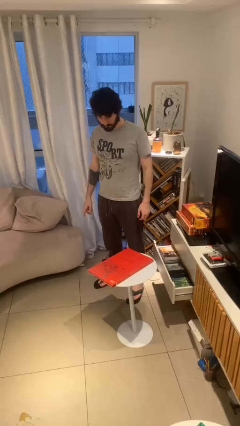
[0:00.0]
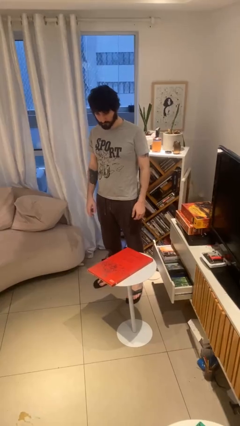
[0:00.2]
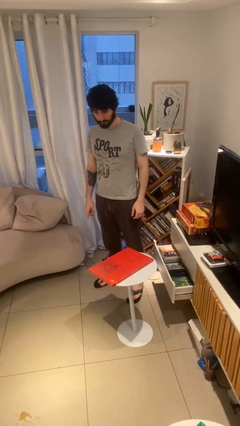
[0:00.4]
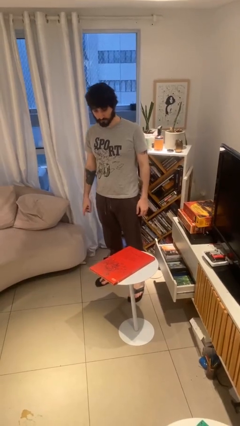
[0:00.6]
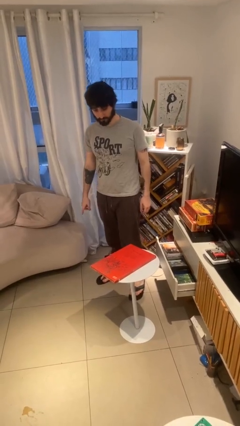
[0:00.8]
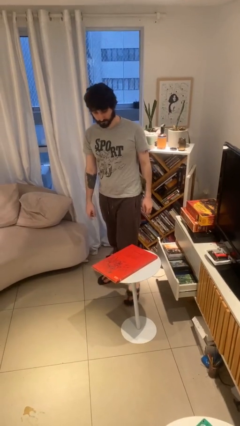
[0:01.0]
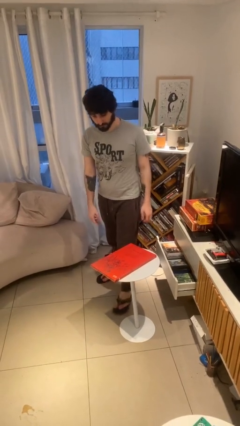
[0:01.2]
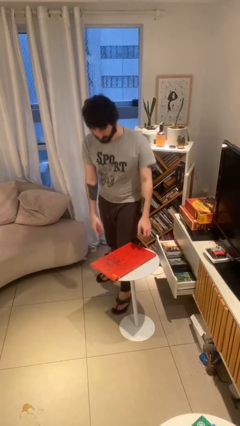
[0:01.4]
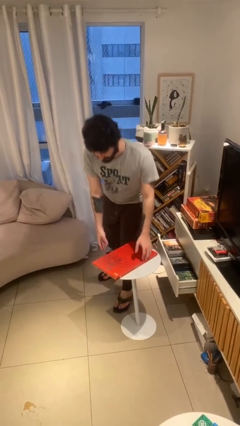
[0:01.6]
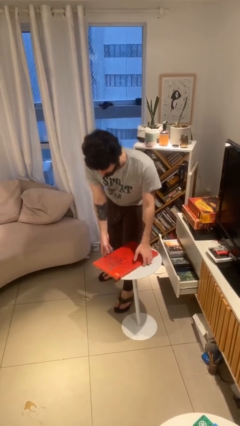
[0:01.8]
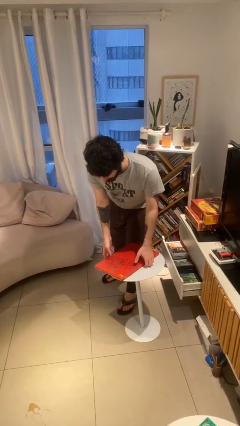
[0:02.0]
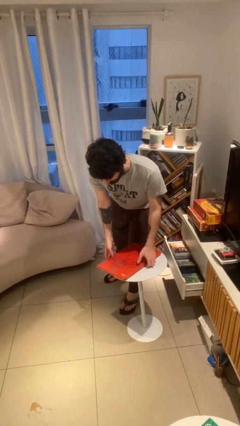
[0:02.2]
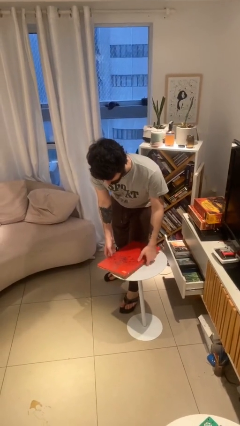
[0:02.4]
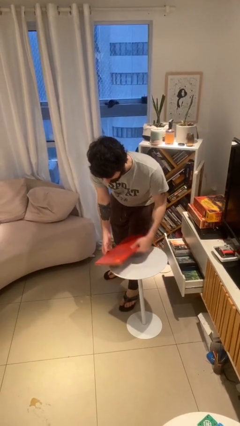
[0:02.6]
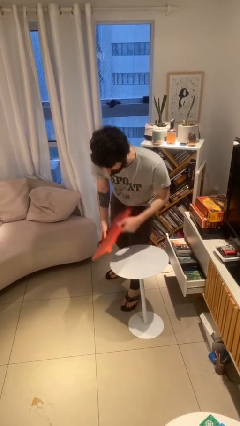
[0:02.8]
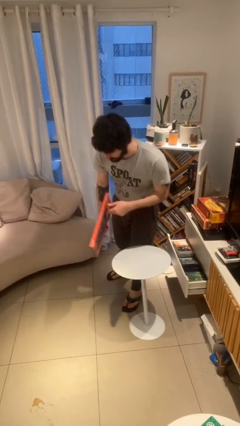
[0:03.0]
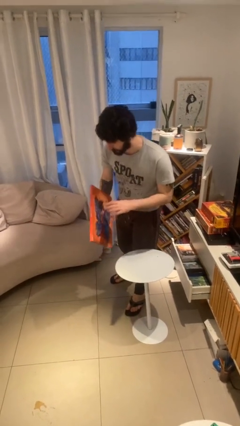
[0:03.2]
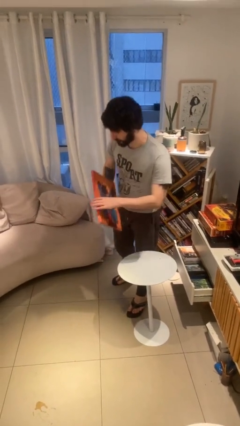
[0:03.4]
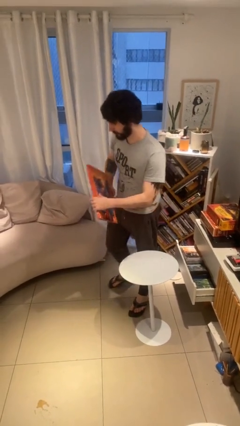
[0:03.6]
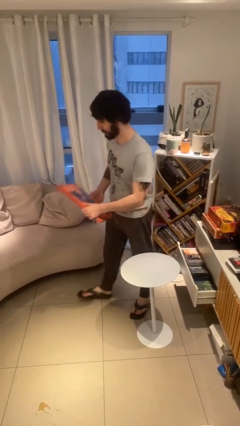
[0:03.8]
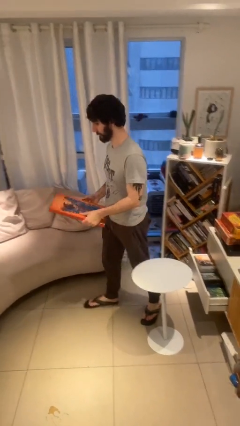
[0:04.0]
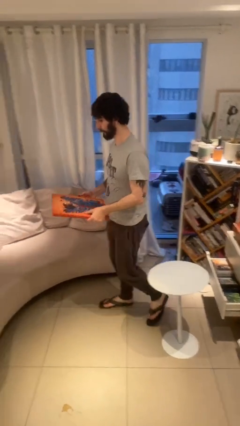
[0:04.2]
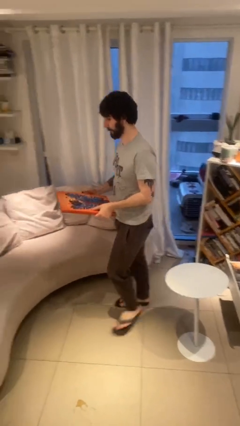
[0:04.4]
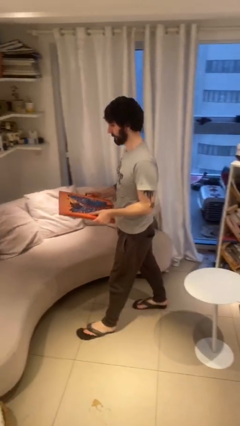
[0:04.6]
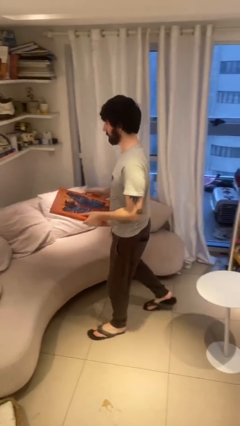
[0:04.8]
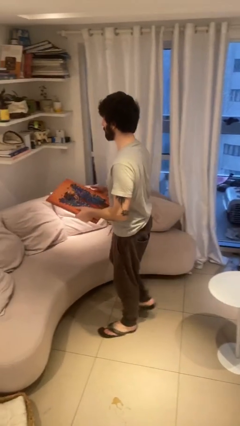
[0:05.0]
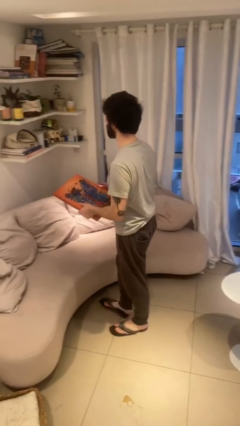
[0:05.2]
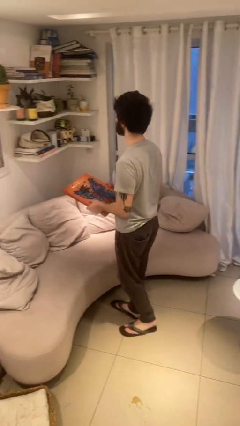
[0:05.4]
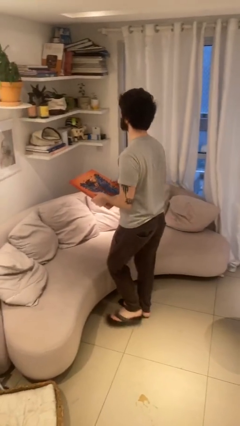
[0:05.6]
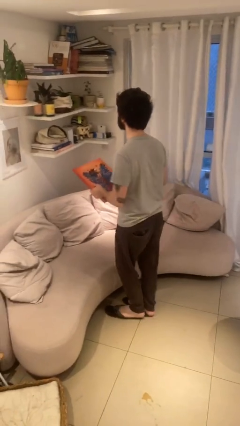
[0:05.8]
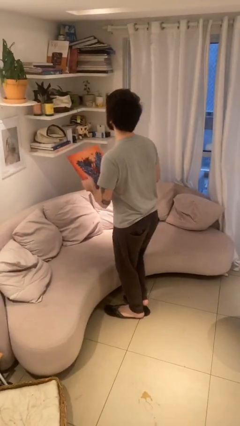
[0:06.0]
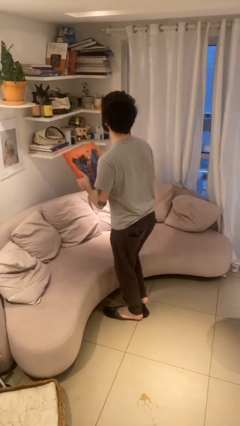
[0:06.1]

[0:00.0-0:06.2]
person picks up object from table

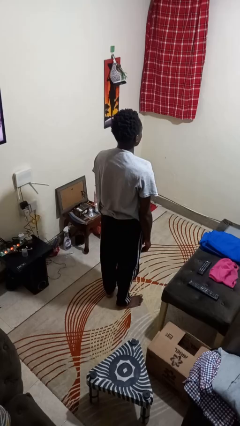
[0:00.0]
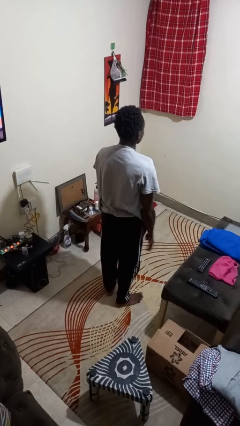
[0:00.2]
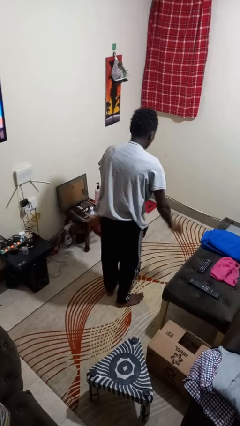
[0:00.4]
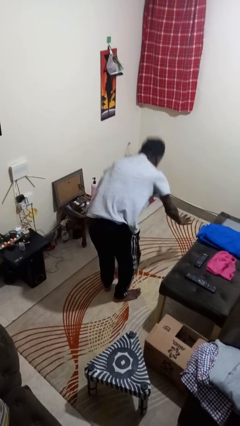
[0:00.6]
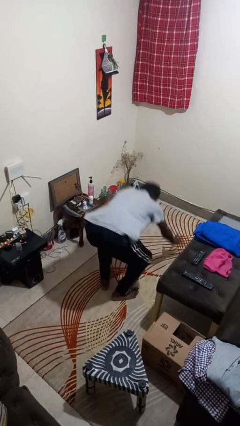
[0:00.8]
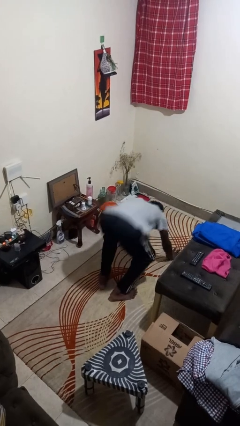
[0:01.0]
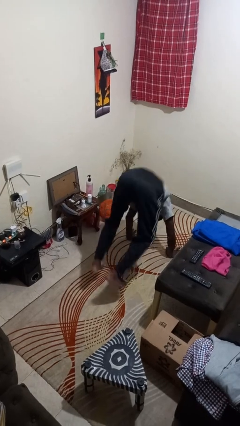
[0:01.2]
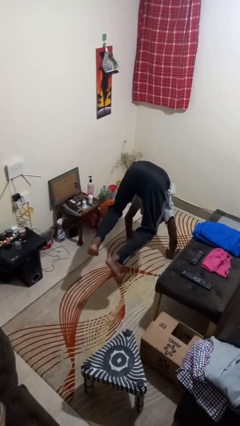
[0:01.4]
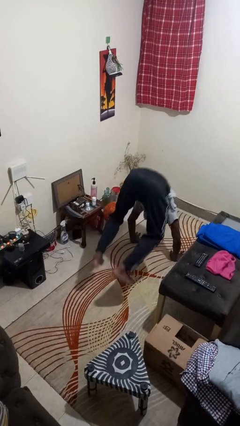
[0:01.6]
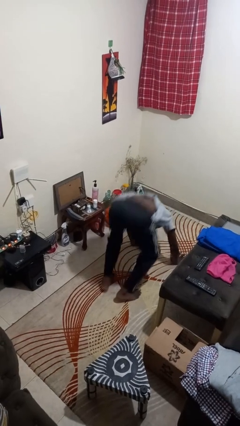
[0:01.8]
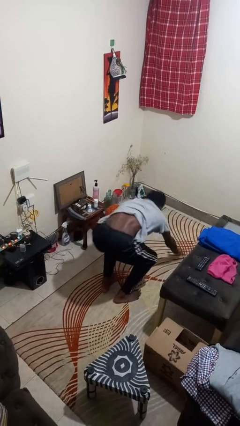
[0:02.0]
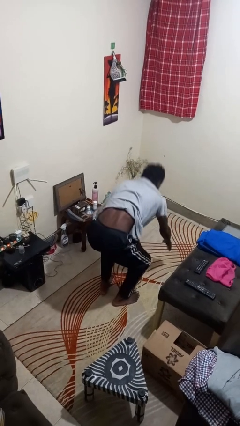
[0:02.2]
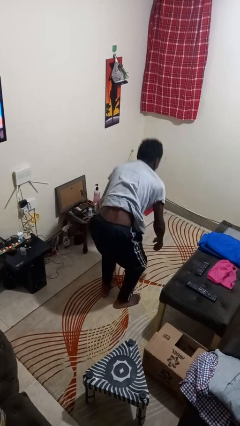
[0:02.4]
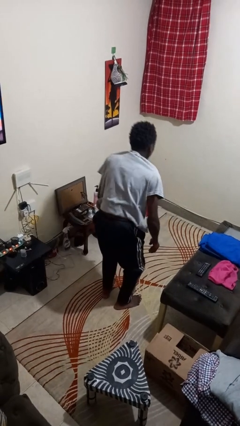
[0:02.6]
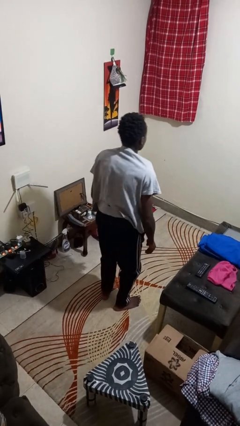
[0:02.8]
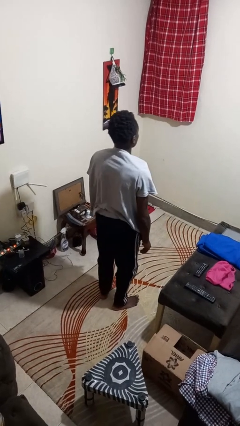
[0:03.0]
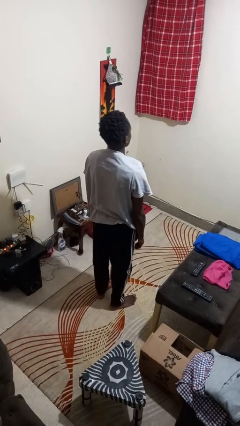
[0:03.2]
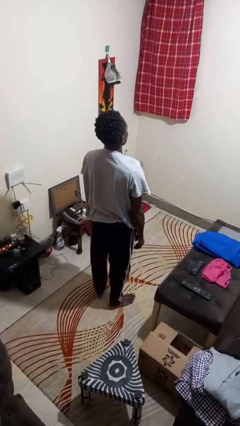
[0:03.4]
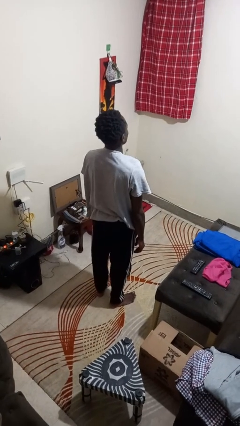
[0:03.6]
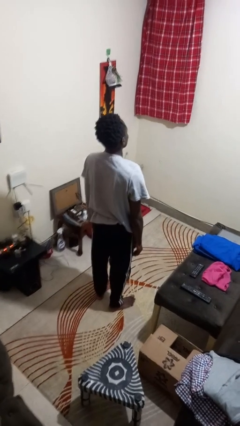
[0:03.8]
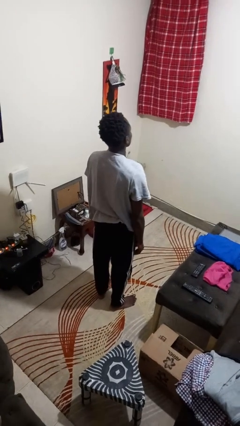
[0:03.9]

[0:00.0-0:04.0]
person handstand

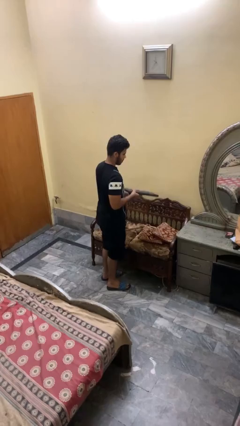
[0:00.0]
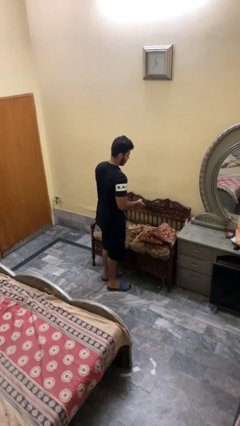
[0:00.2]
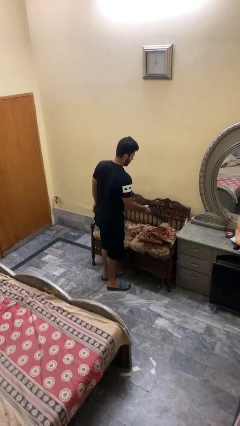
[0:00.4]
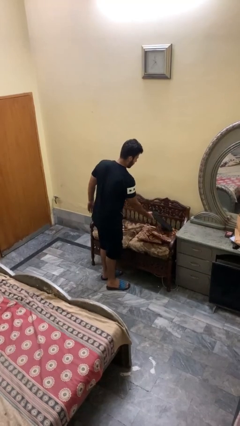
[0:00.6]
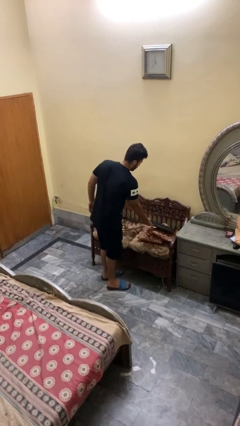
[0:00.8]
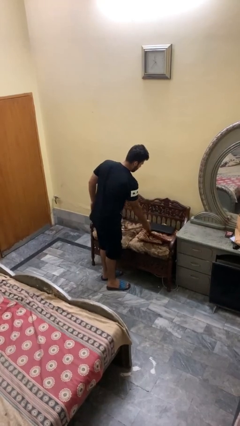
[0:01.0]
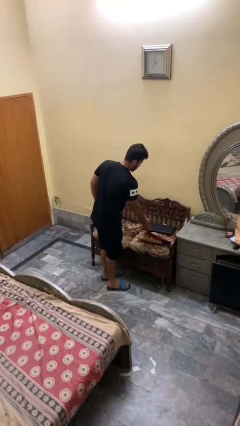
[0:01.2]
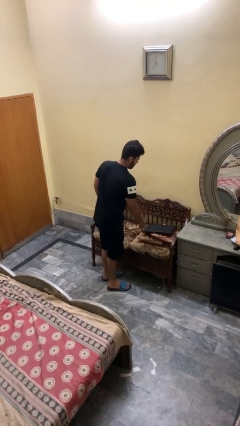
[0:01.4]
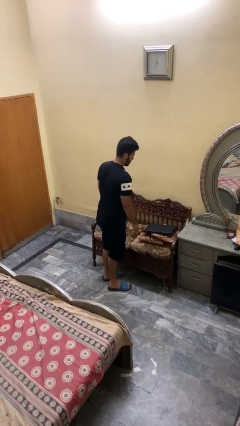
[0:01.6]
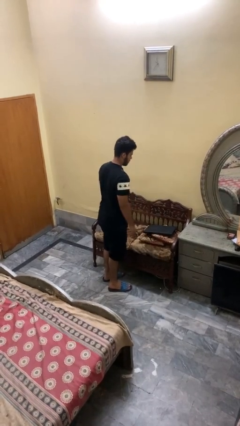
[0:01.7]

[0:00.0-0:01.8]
person puts down object on couch

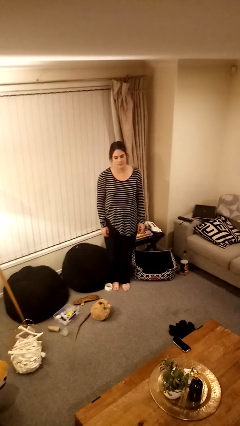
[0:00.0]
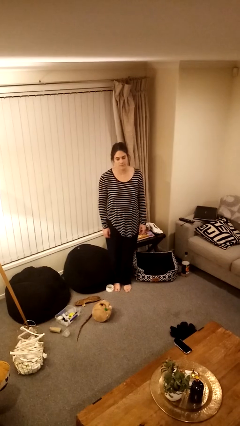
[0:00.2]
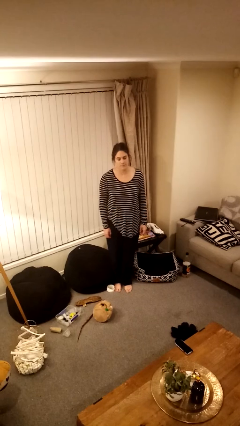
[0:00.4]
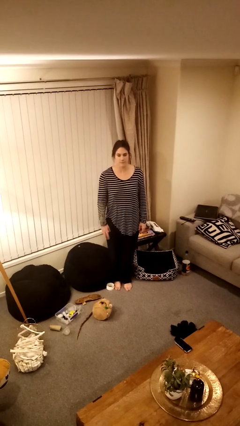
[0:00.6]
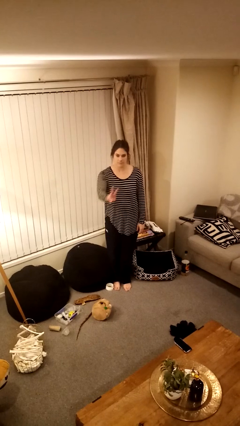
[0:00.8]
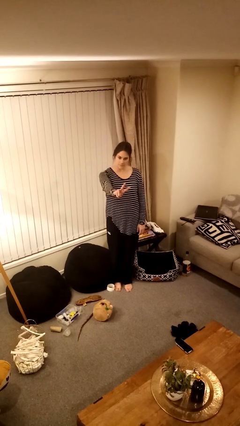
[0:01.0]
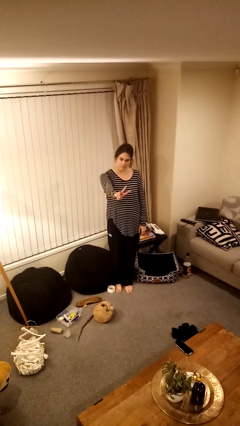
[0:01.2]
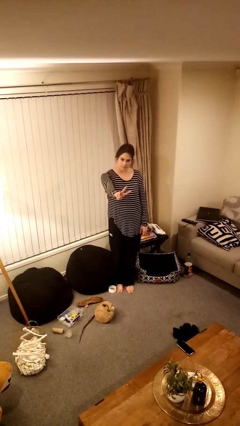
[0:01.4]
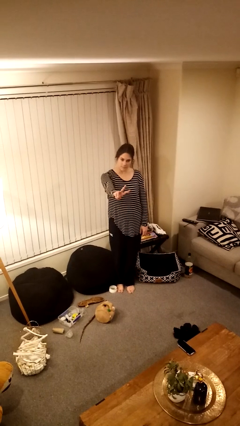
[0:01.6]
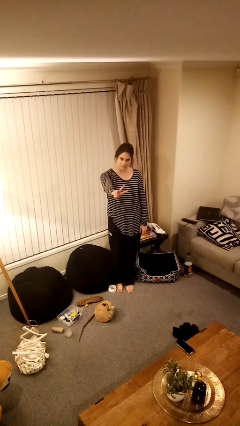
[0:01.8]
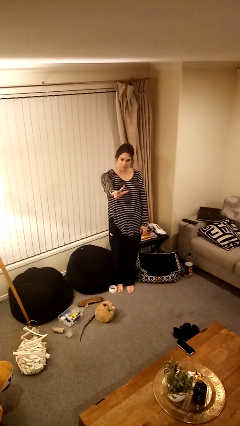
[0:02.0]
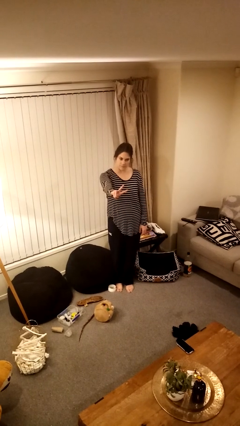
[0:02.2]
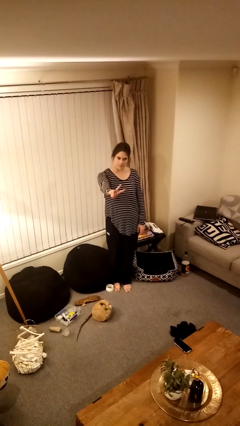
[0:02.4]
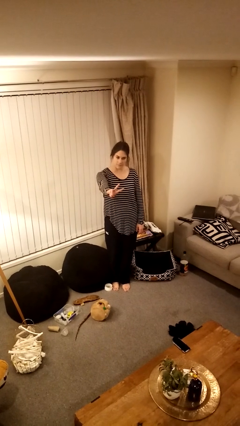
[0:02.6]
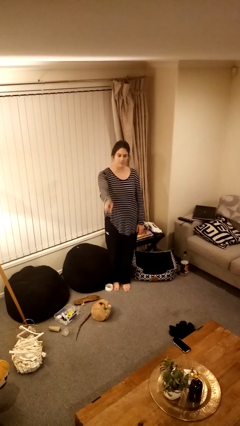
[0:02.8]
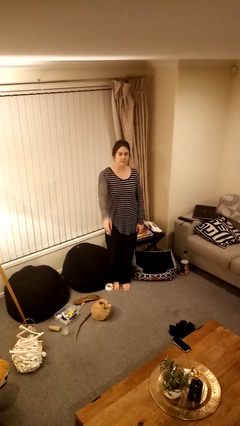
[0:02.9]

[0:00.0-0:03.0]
person gestures peace

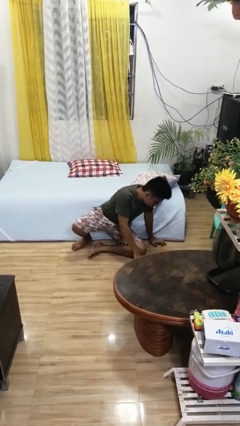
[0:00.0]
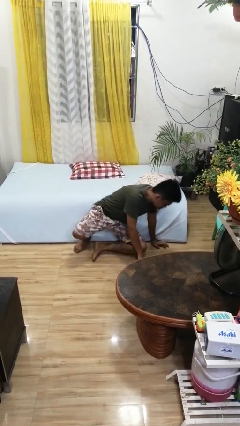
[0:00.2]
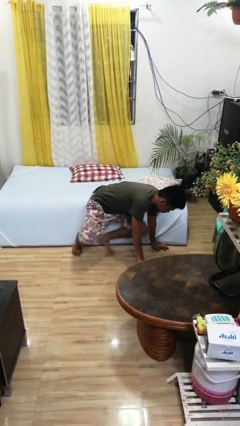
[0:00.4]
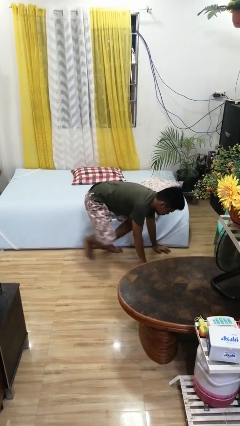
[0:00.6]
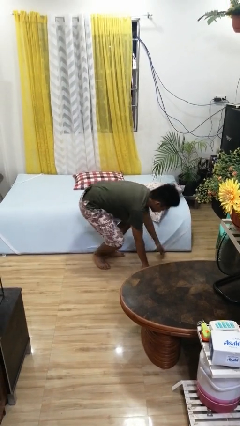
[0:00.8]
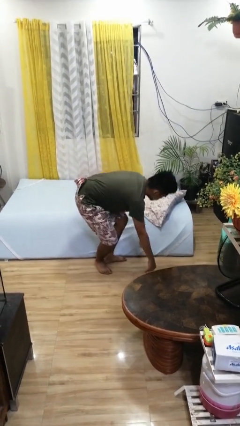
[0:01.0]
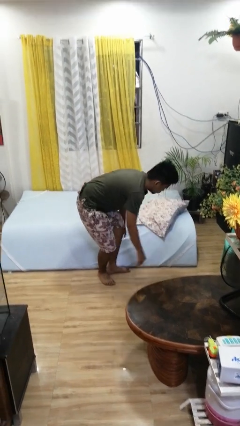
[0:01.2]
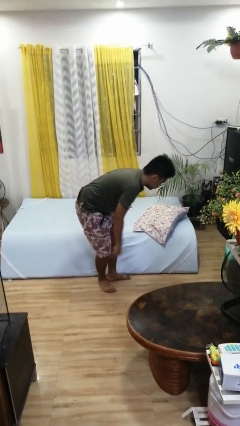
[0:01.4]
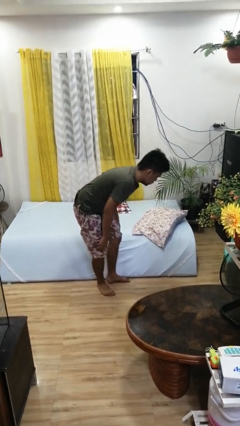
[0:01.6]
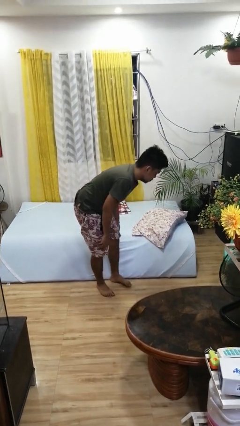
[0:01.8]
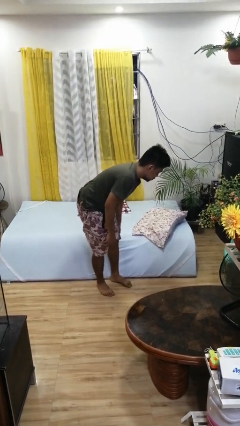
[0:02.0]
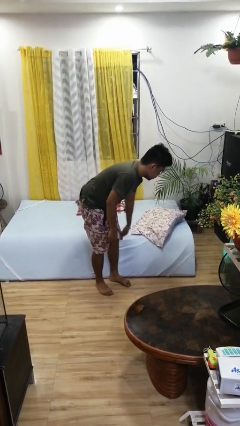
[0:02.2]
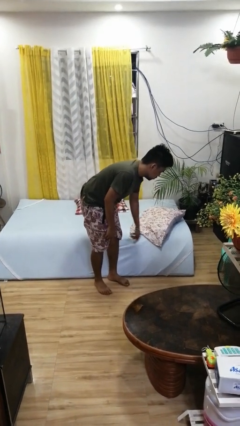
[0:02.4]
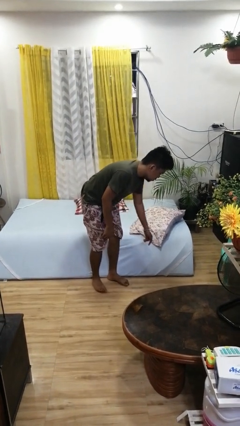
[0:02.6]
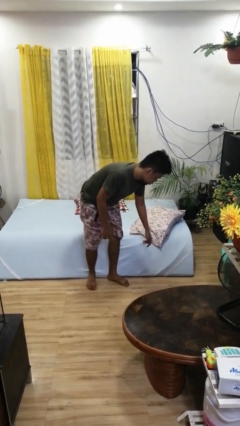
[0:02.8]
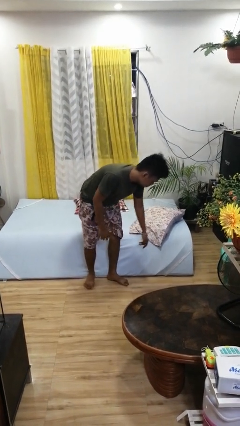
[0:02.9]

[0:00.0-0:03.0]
person stands up from floor
